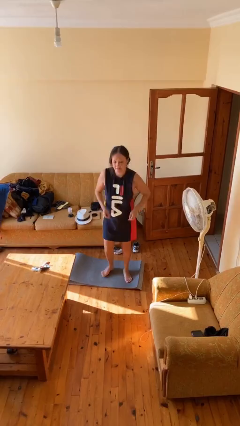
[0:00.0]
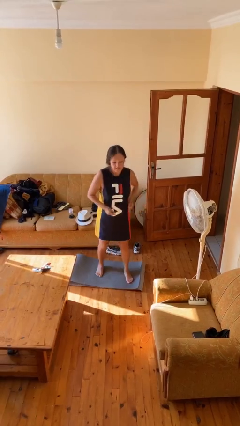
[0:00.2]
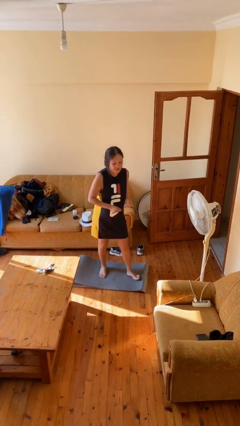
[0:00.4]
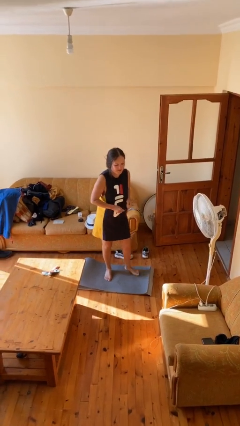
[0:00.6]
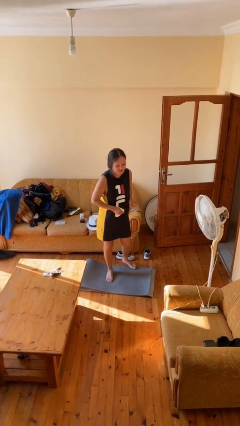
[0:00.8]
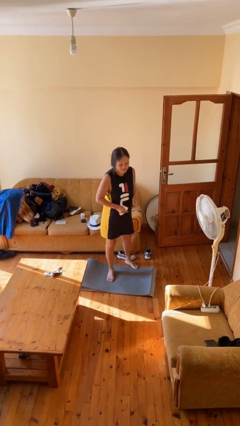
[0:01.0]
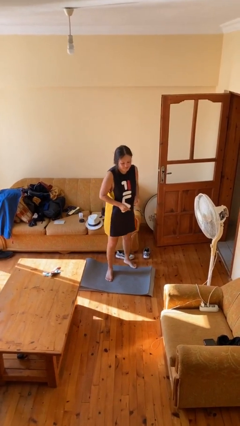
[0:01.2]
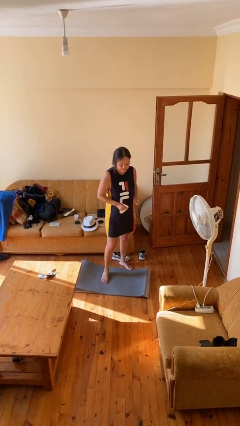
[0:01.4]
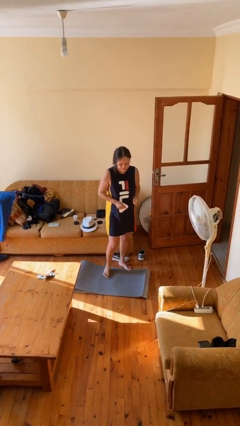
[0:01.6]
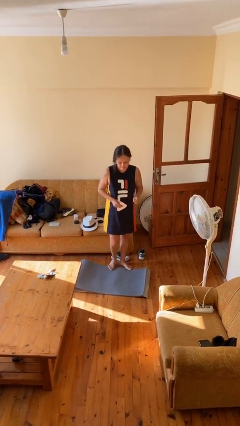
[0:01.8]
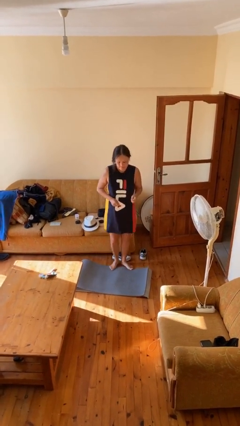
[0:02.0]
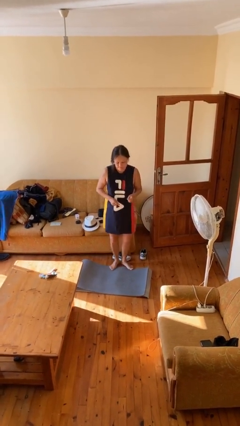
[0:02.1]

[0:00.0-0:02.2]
person karate kicks

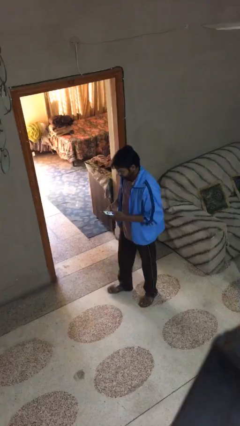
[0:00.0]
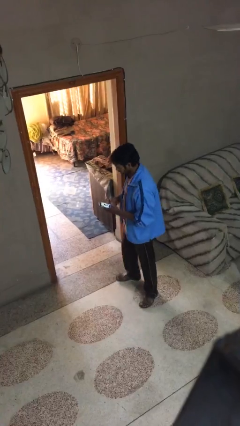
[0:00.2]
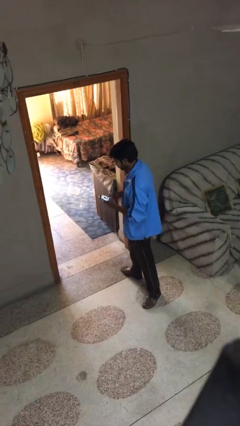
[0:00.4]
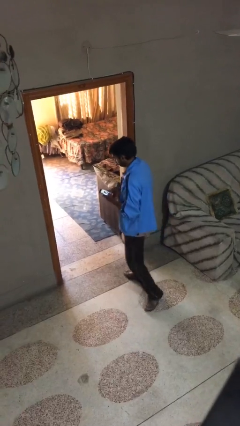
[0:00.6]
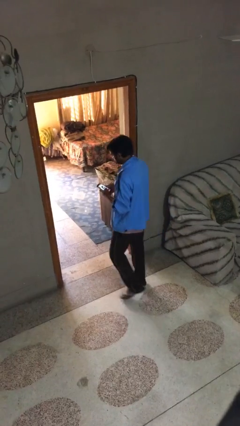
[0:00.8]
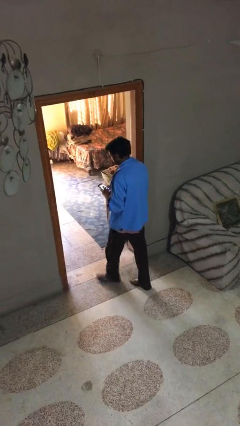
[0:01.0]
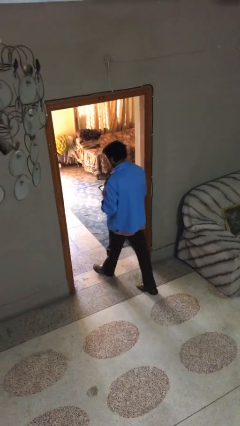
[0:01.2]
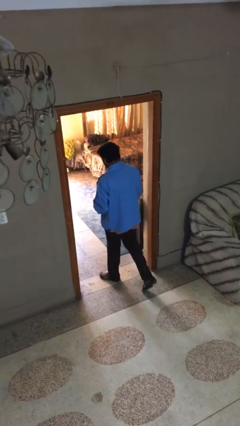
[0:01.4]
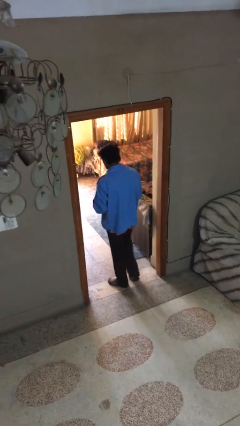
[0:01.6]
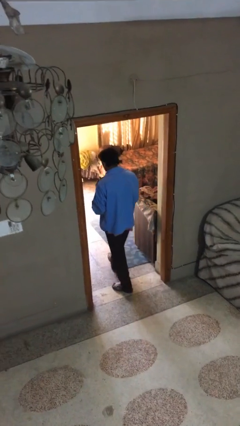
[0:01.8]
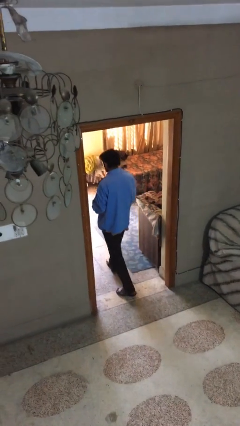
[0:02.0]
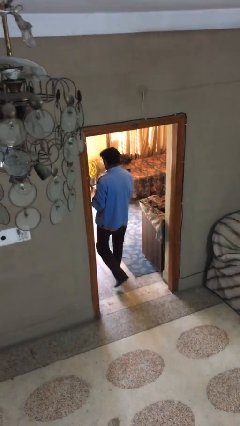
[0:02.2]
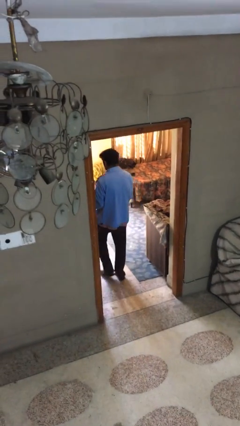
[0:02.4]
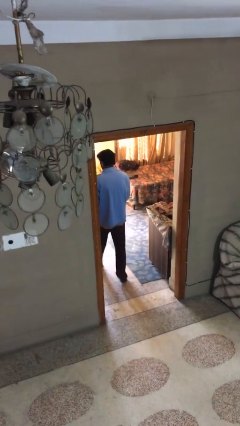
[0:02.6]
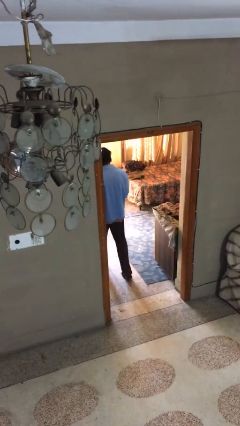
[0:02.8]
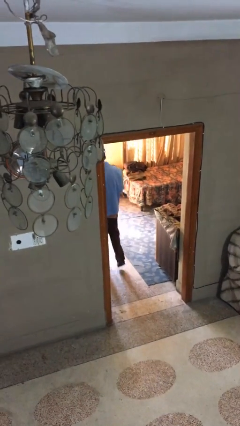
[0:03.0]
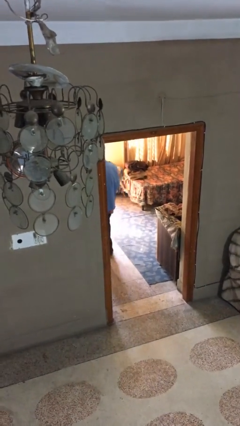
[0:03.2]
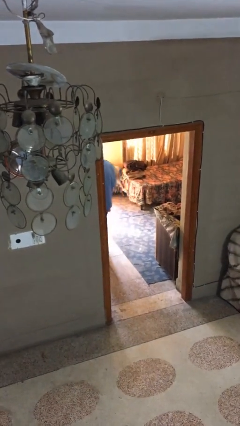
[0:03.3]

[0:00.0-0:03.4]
person exits scene through structure

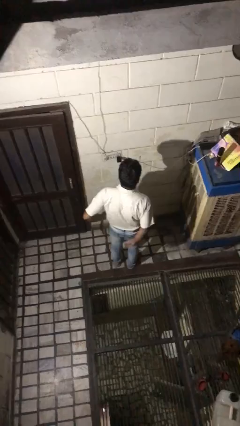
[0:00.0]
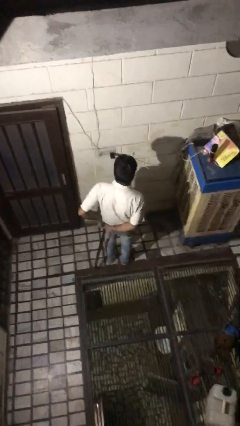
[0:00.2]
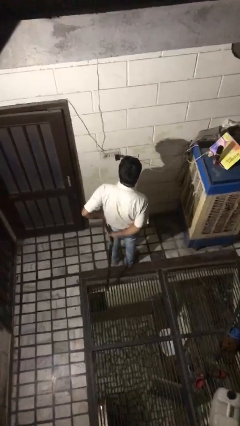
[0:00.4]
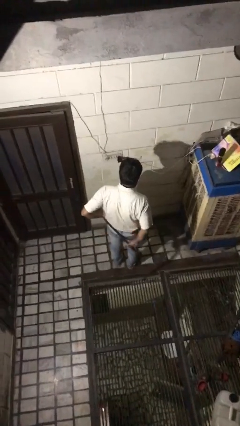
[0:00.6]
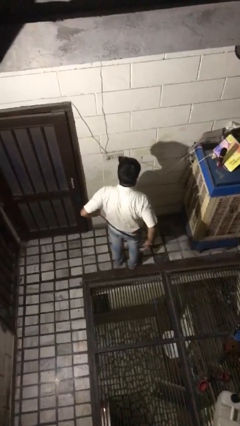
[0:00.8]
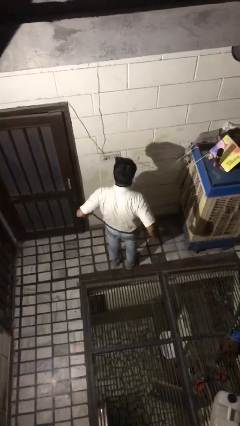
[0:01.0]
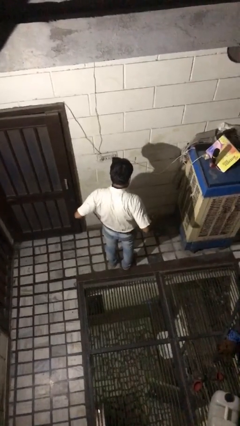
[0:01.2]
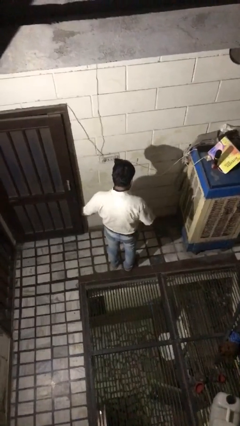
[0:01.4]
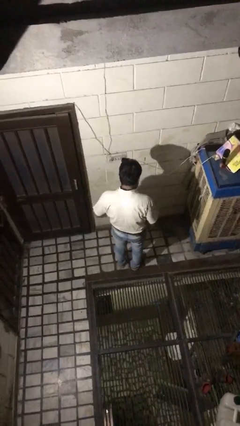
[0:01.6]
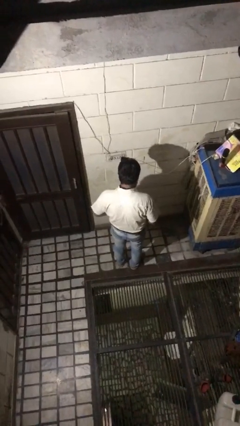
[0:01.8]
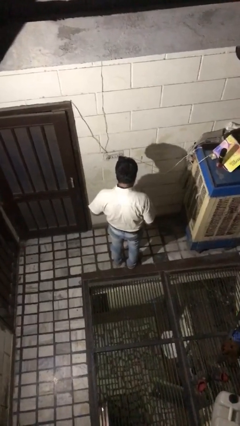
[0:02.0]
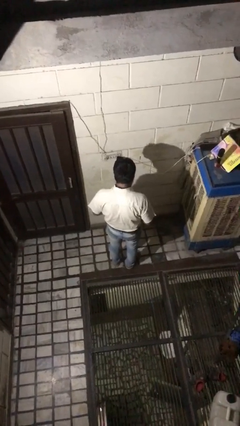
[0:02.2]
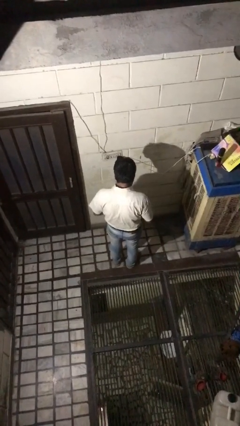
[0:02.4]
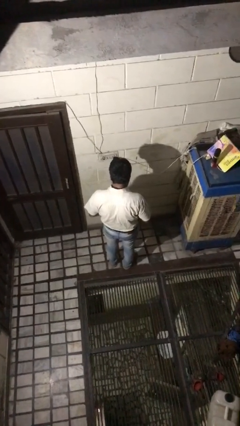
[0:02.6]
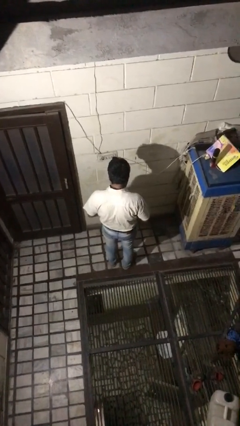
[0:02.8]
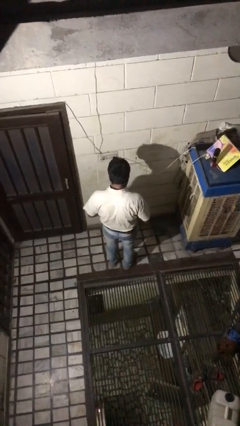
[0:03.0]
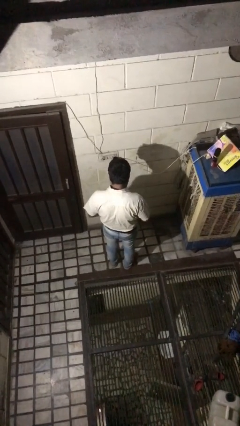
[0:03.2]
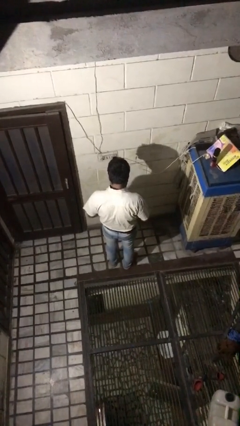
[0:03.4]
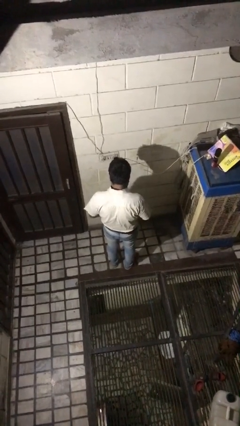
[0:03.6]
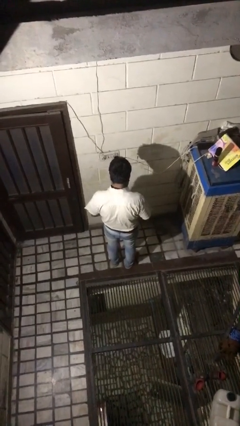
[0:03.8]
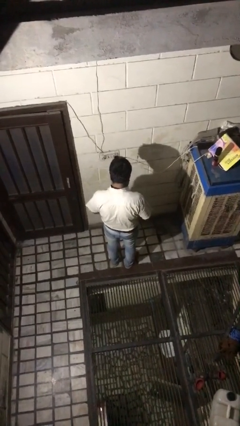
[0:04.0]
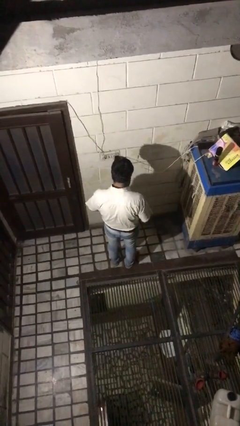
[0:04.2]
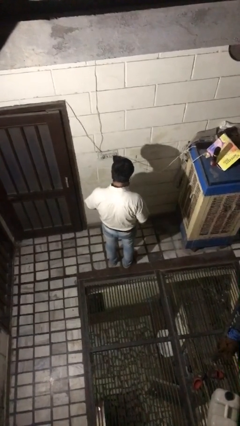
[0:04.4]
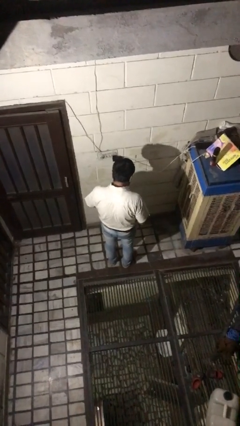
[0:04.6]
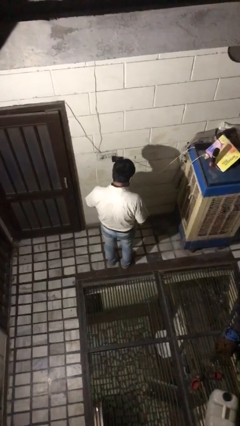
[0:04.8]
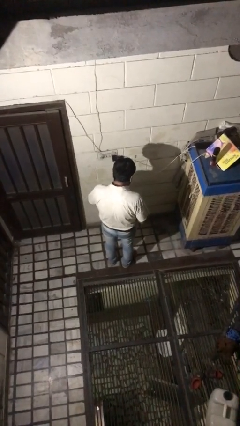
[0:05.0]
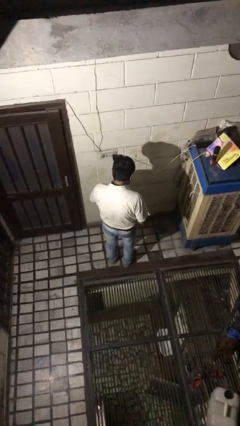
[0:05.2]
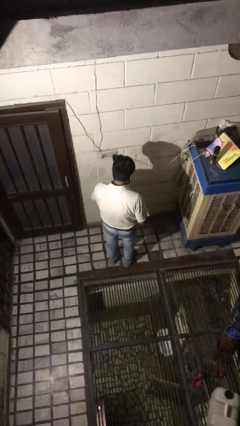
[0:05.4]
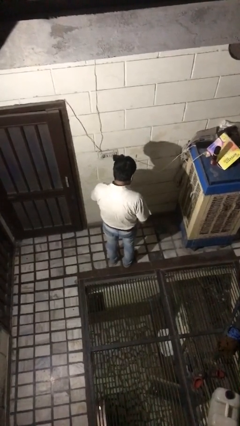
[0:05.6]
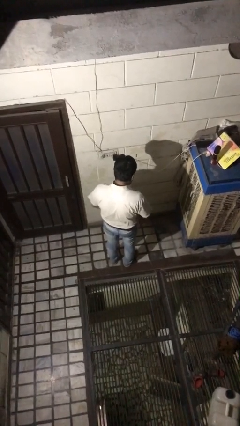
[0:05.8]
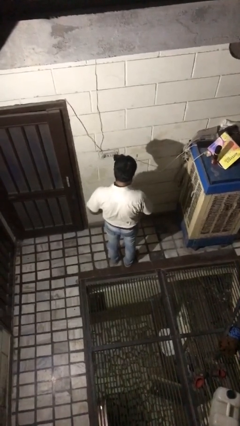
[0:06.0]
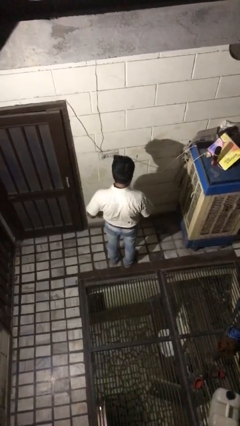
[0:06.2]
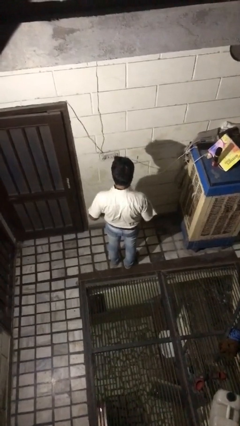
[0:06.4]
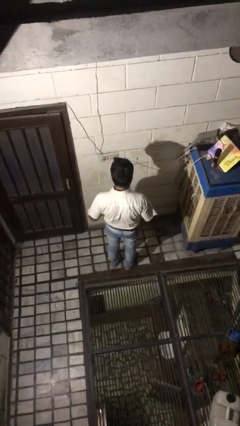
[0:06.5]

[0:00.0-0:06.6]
person puts on belt

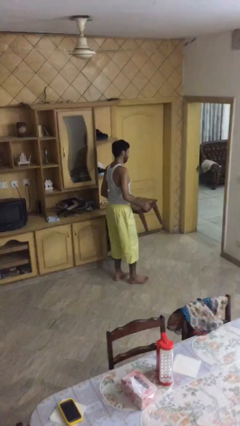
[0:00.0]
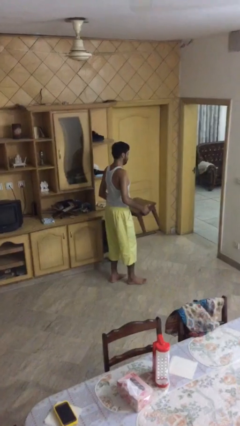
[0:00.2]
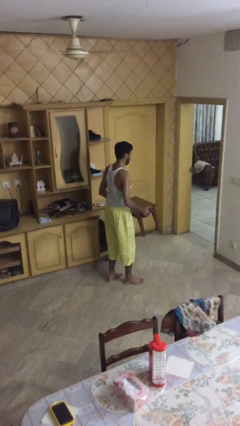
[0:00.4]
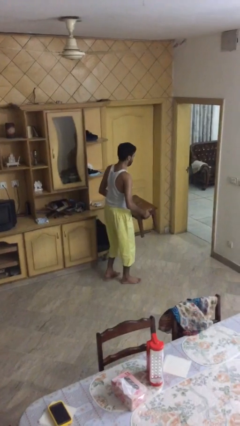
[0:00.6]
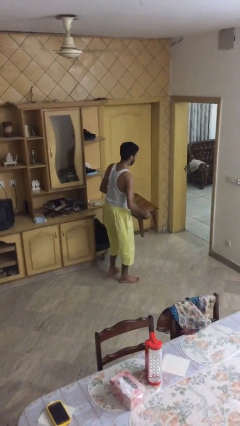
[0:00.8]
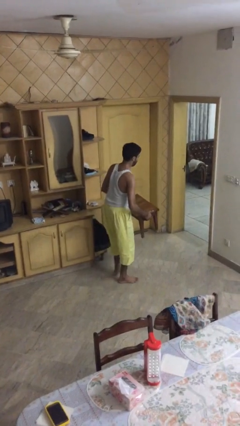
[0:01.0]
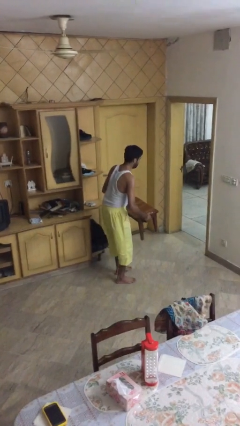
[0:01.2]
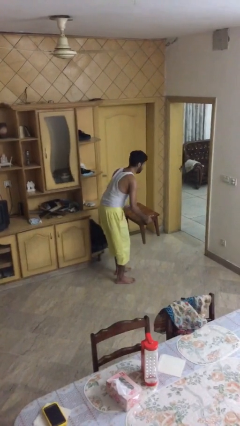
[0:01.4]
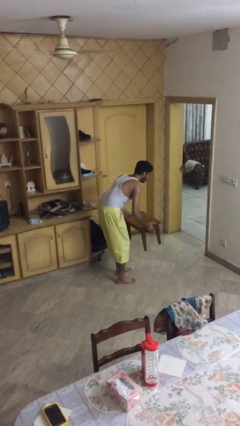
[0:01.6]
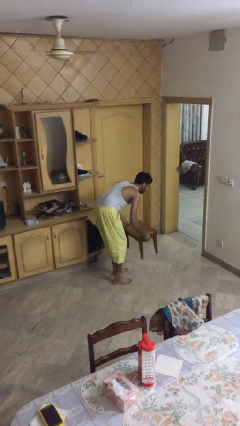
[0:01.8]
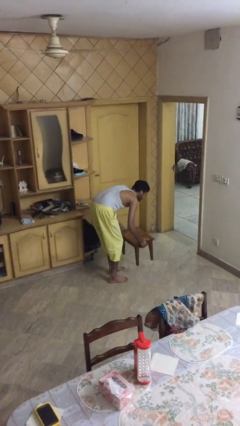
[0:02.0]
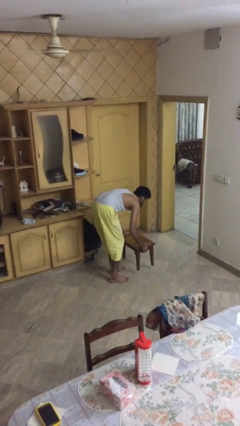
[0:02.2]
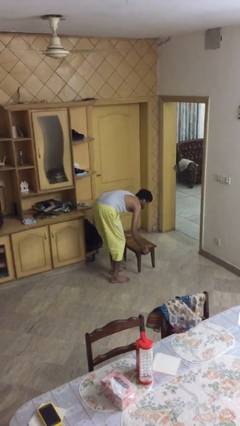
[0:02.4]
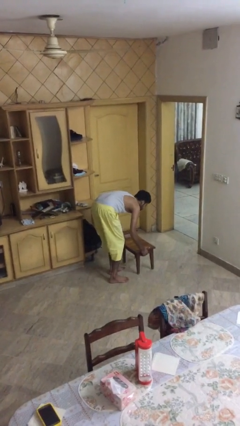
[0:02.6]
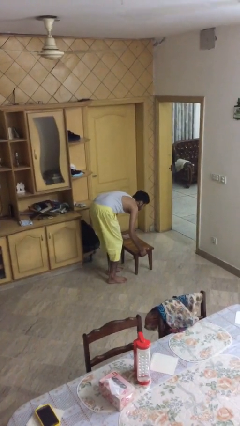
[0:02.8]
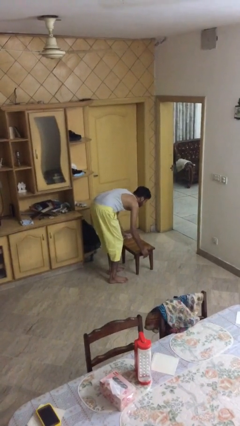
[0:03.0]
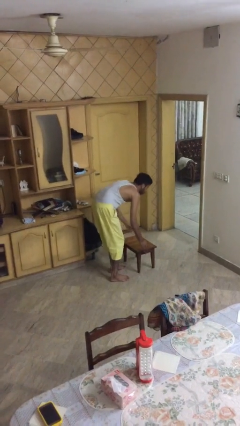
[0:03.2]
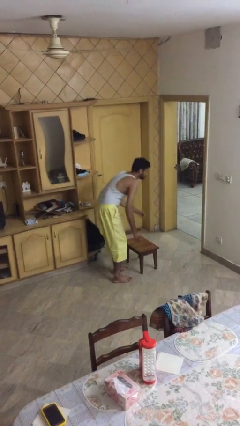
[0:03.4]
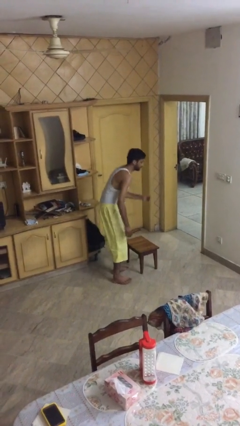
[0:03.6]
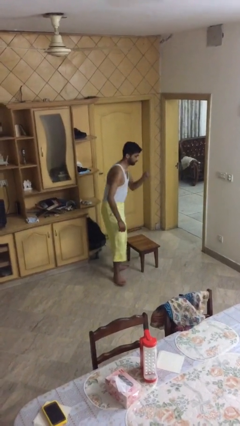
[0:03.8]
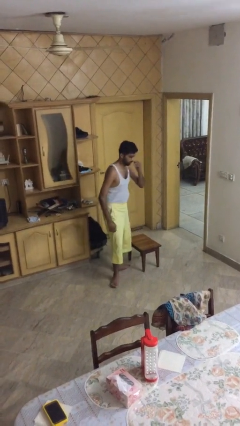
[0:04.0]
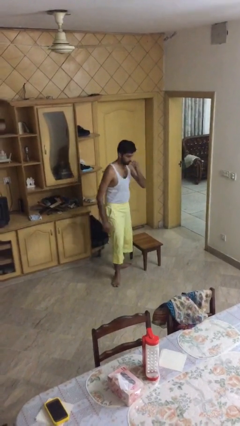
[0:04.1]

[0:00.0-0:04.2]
person puts down object on floor

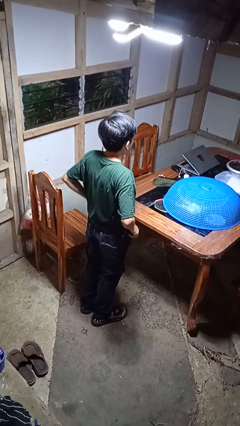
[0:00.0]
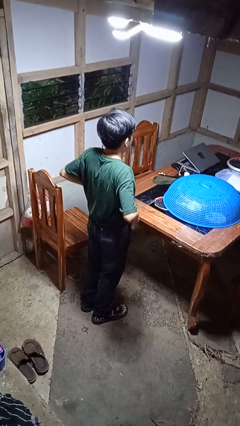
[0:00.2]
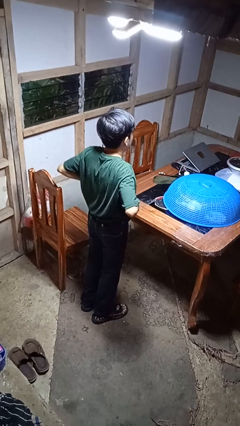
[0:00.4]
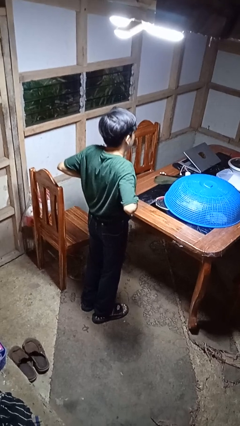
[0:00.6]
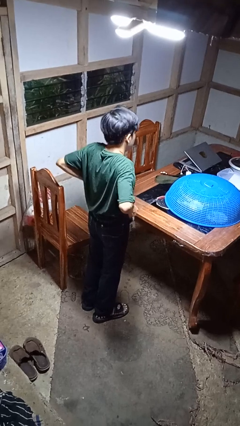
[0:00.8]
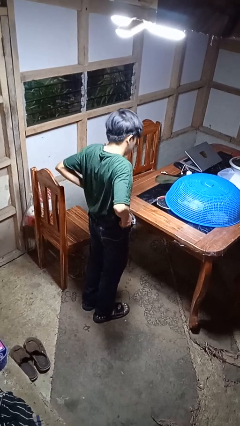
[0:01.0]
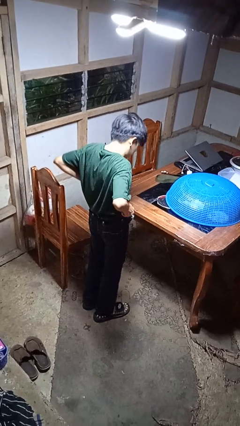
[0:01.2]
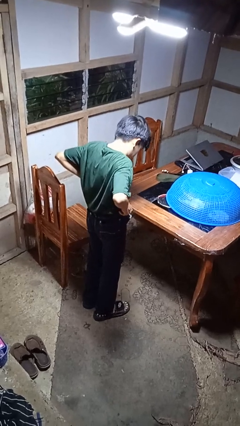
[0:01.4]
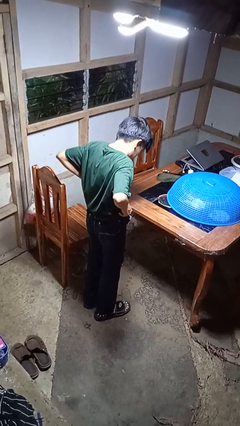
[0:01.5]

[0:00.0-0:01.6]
person hikes up pants
